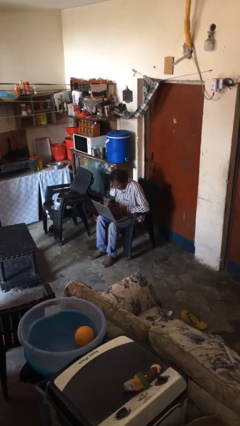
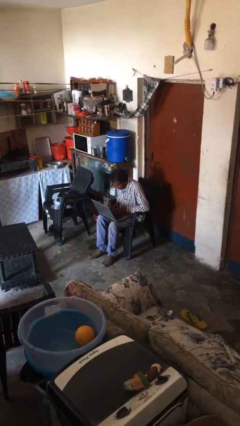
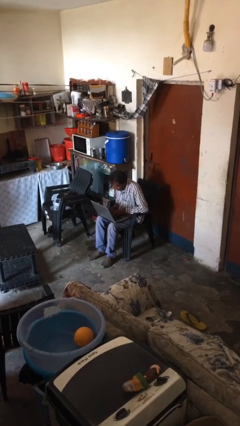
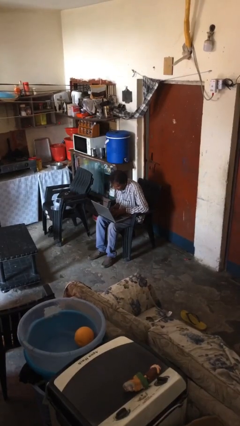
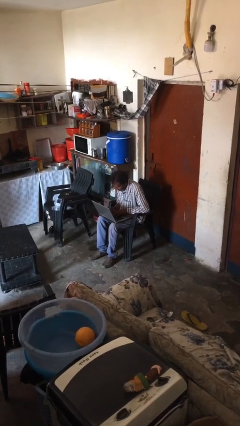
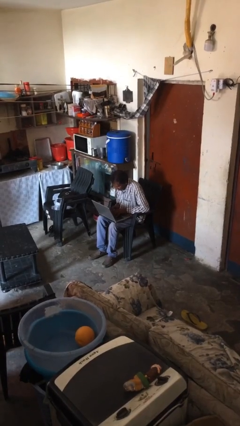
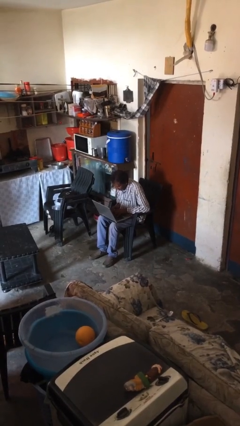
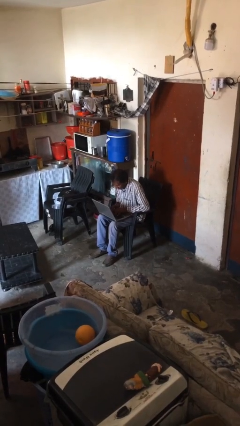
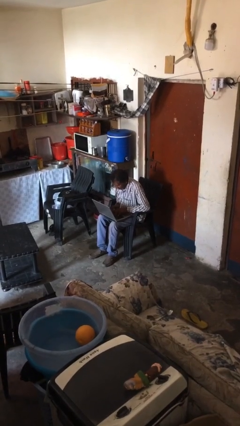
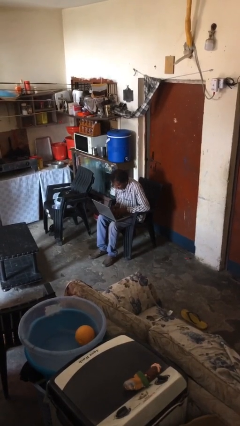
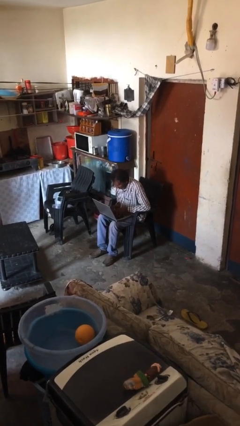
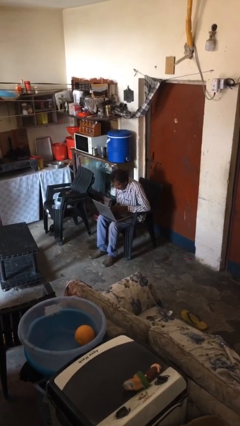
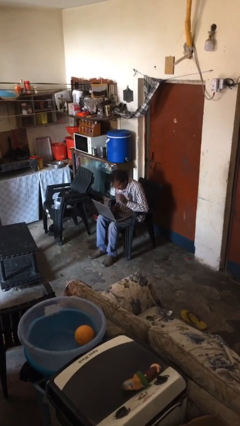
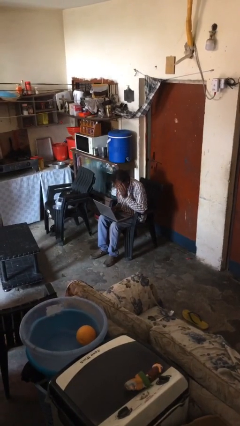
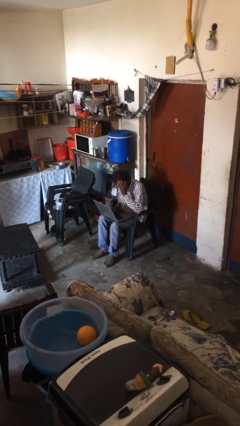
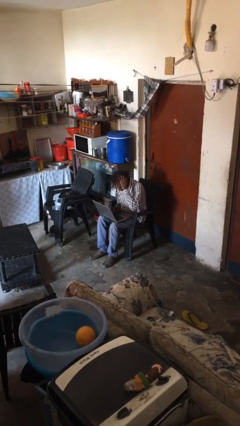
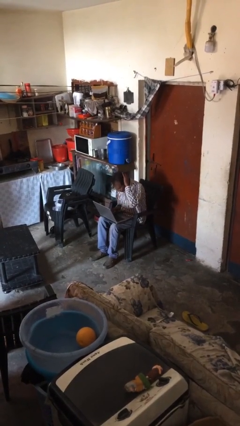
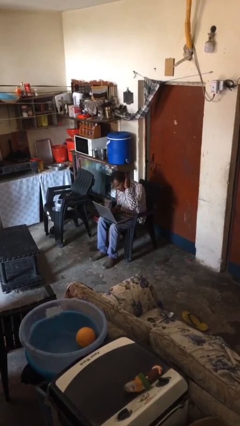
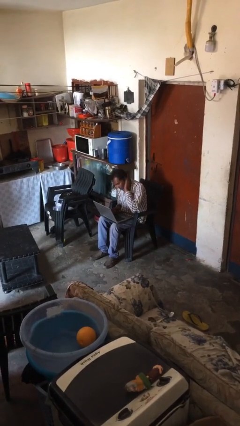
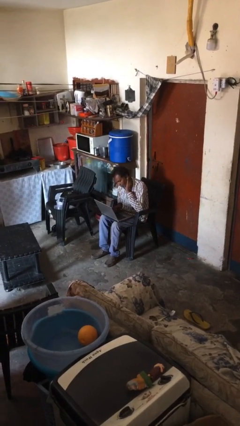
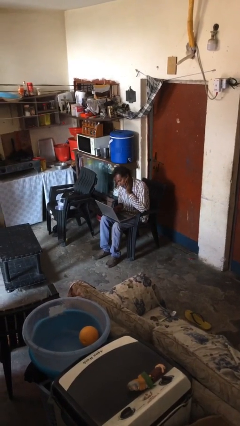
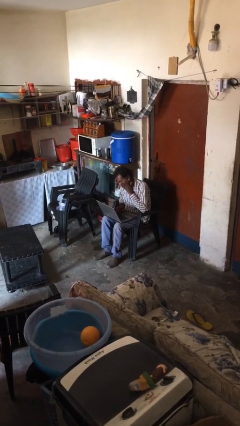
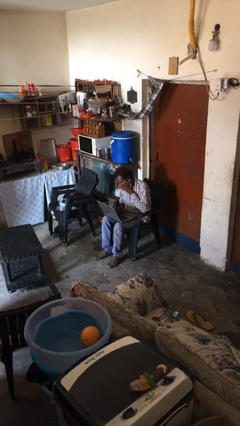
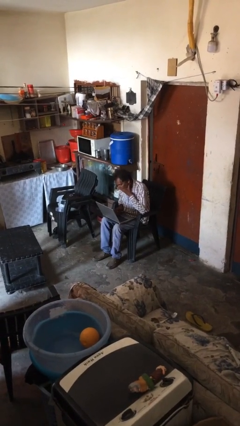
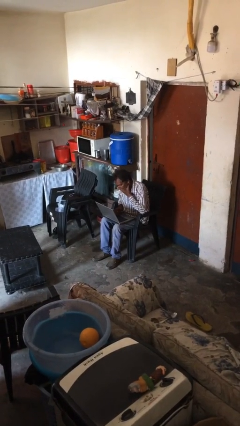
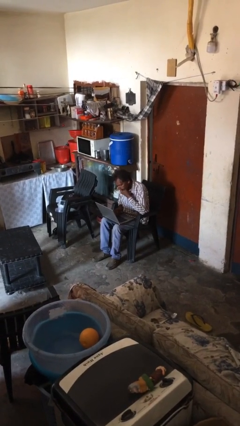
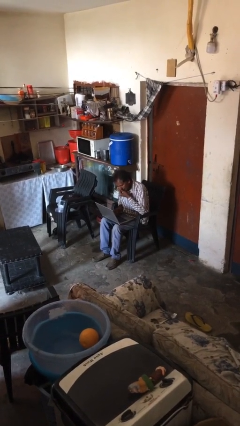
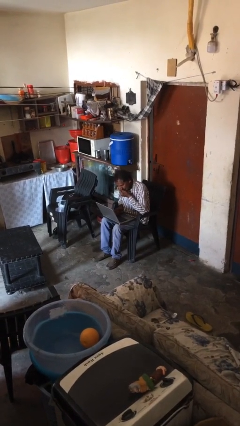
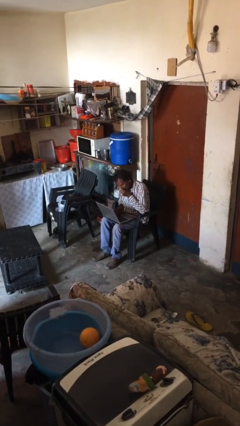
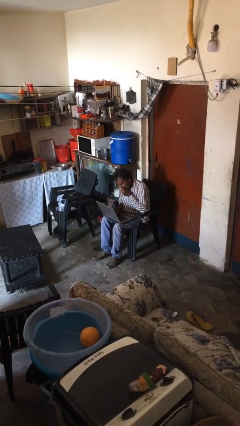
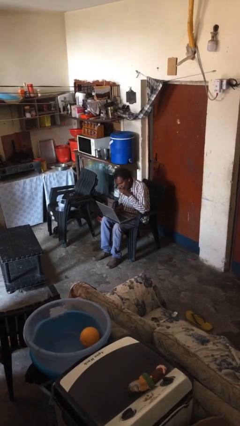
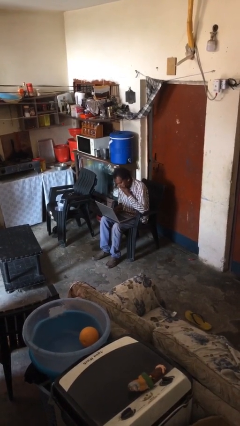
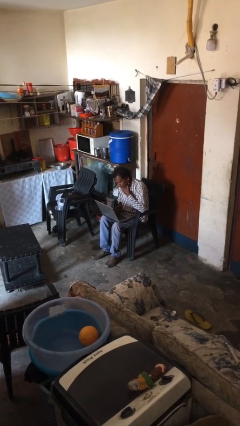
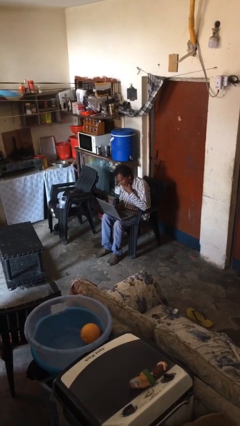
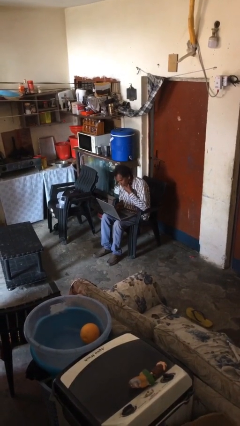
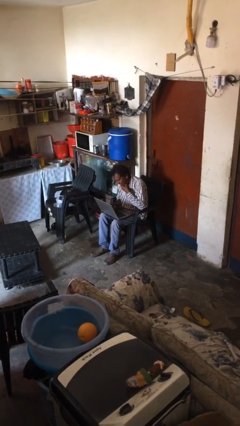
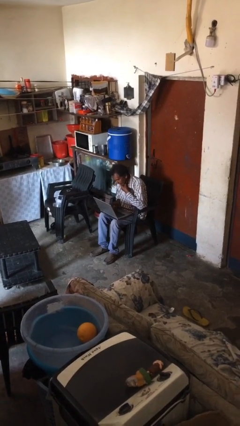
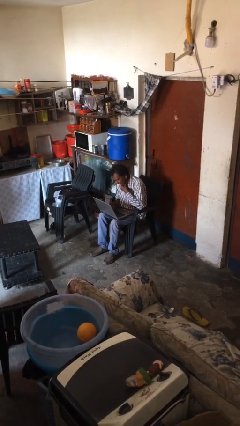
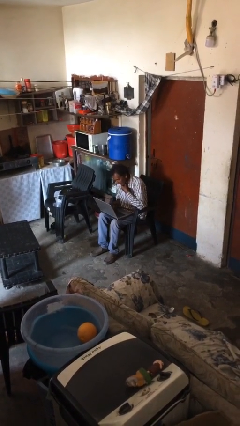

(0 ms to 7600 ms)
person interacts with laptop

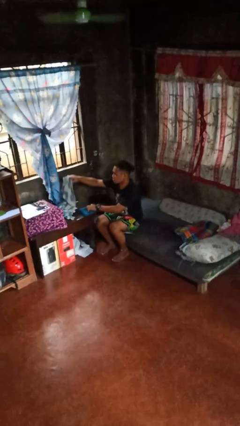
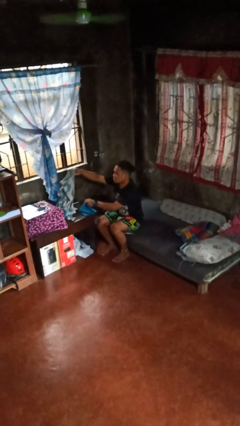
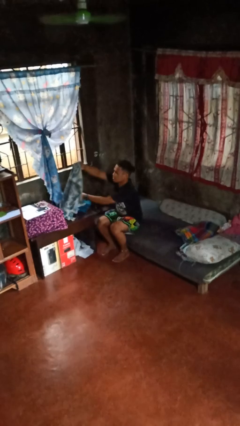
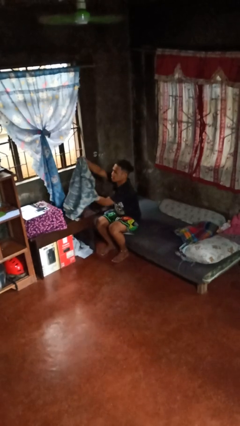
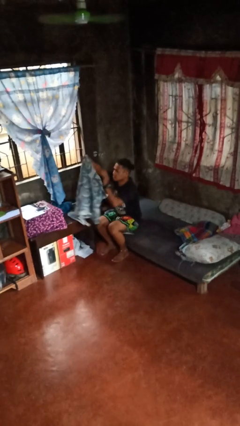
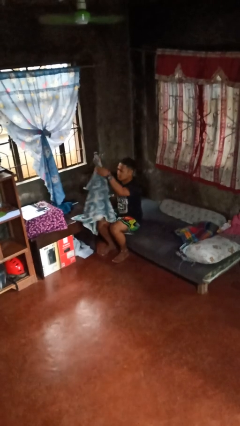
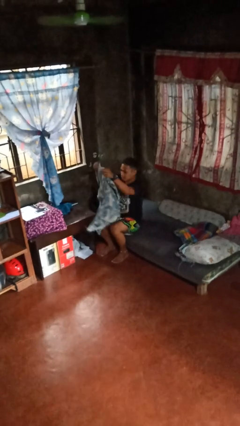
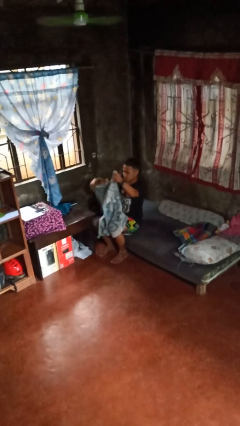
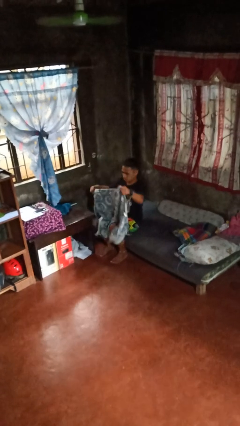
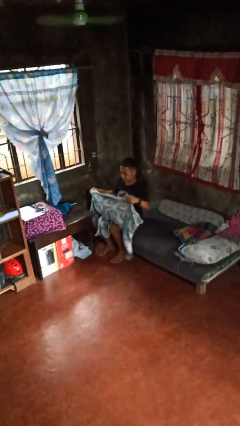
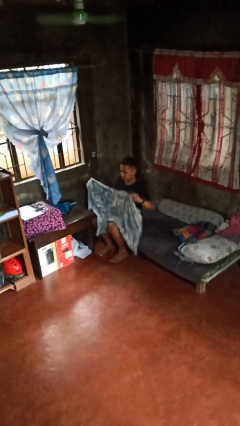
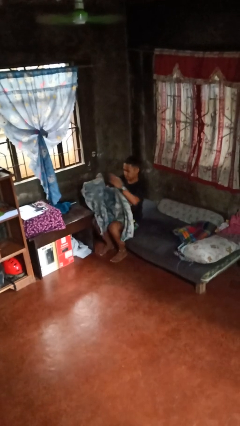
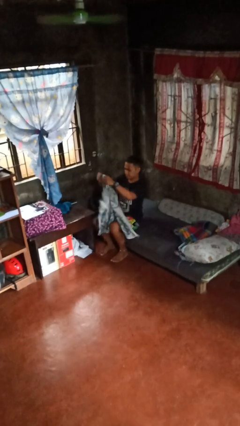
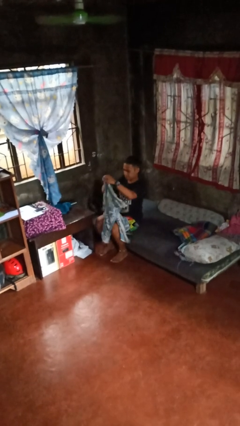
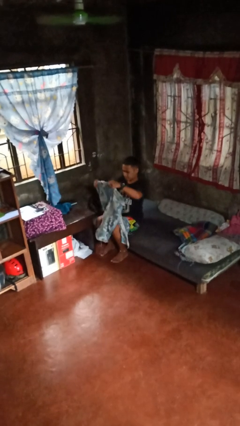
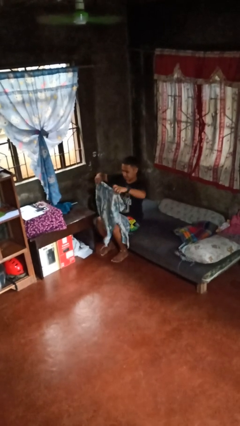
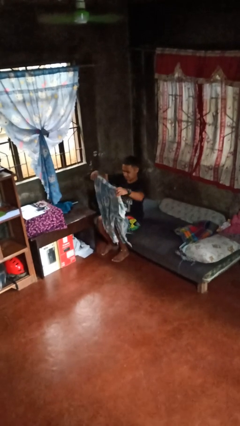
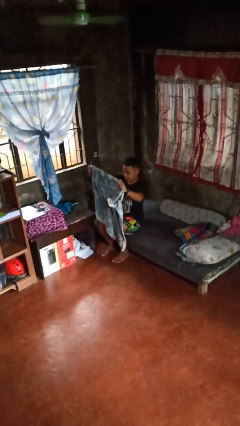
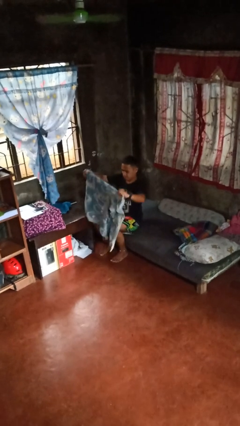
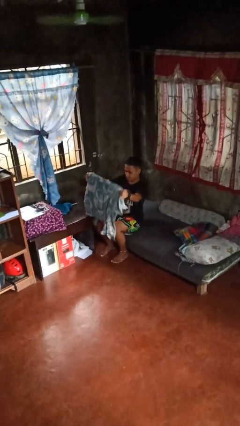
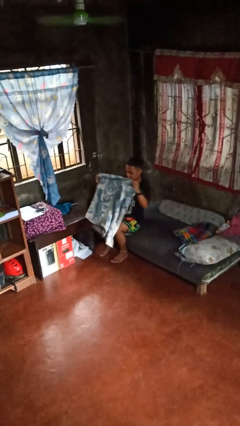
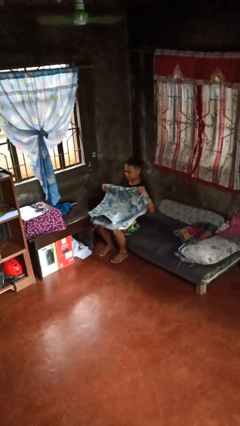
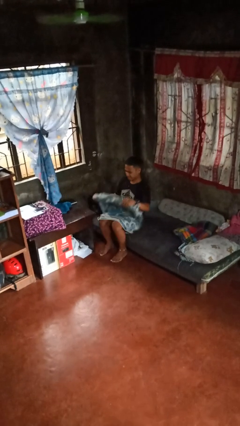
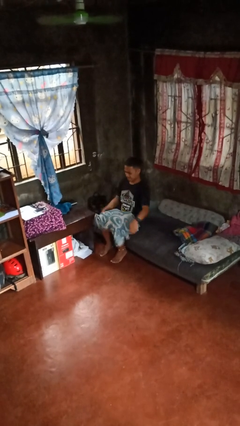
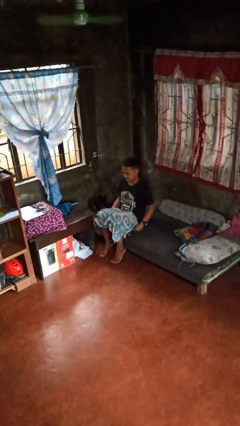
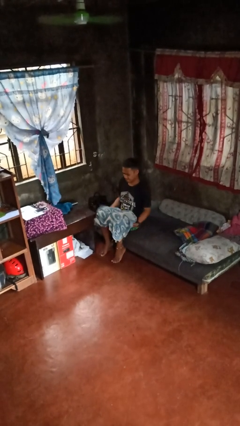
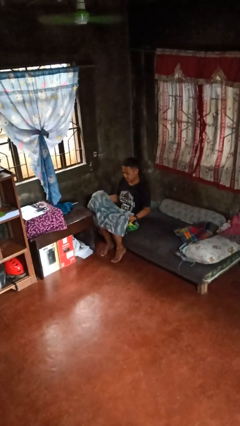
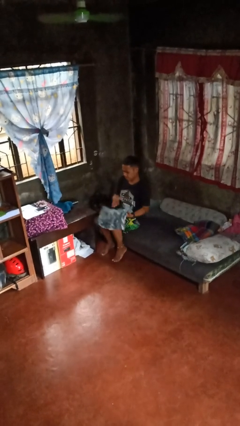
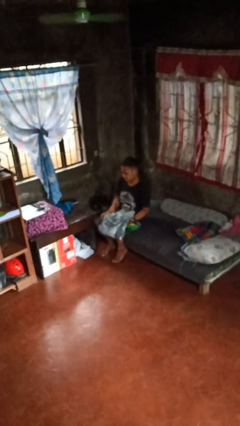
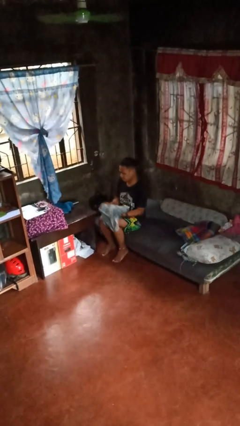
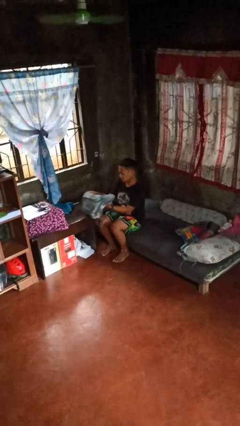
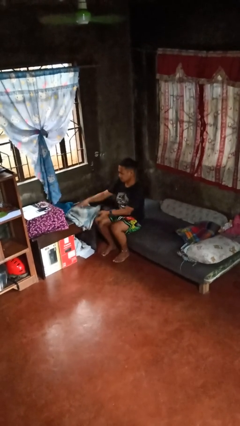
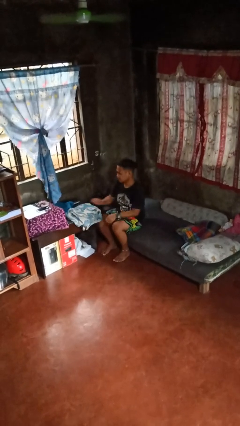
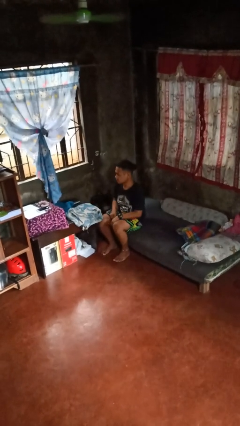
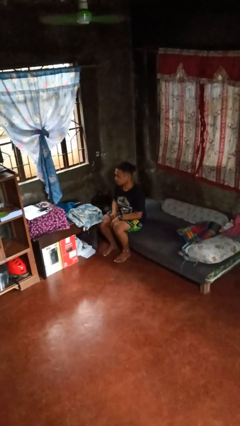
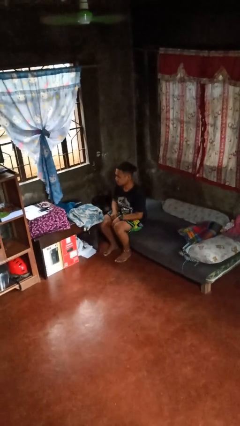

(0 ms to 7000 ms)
person folds towel

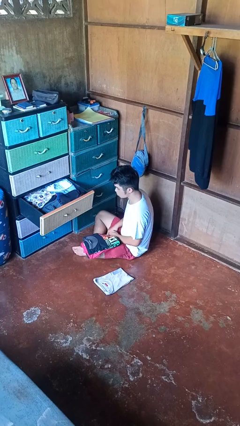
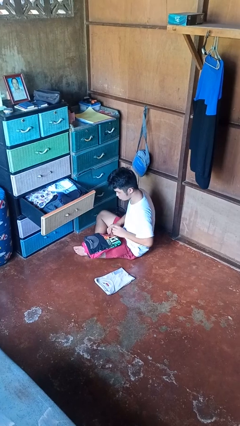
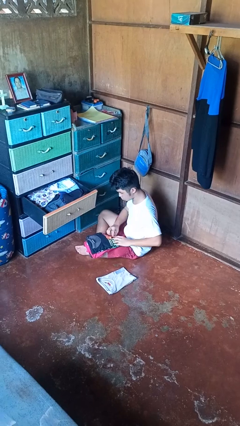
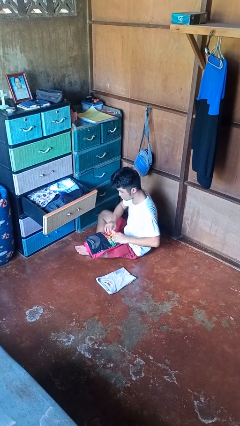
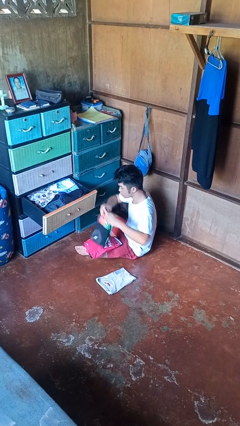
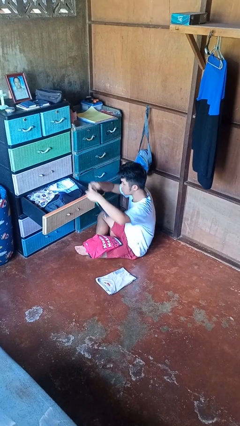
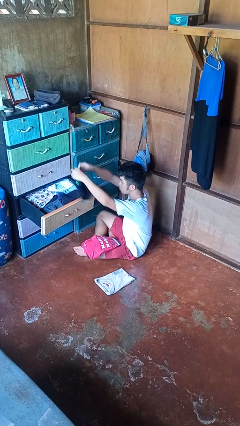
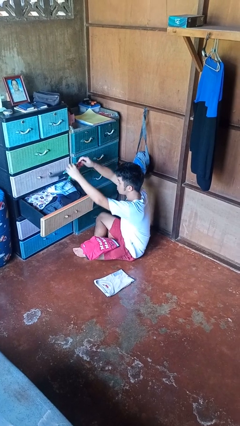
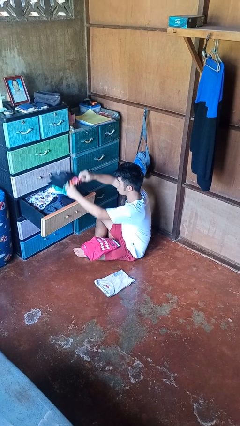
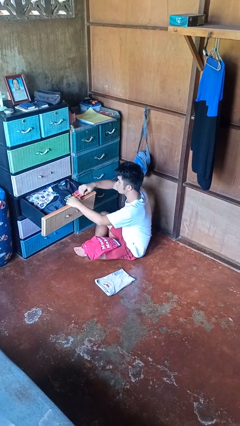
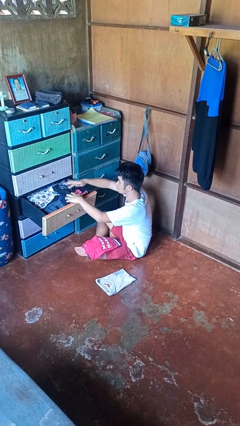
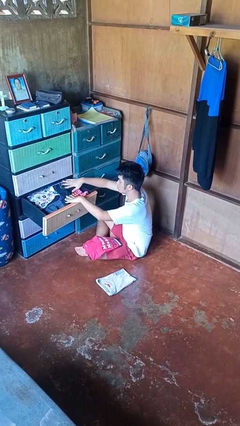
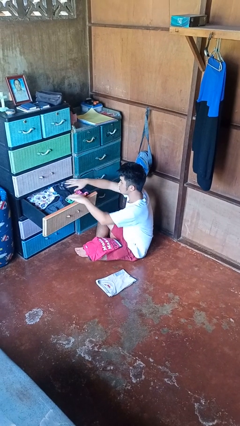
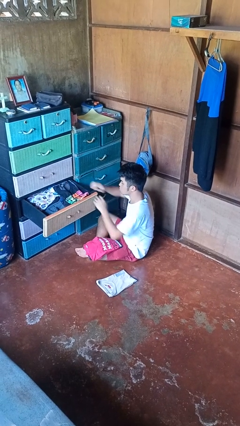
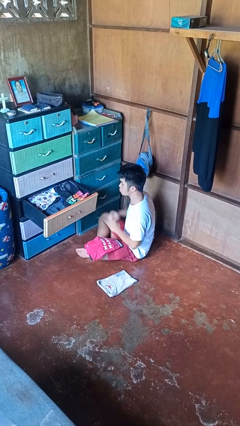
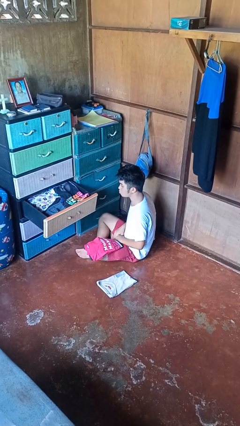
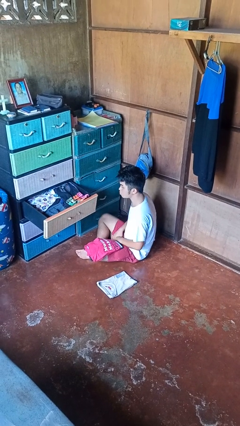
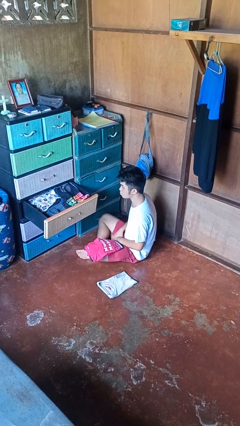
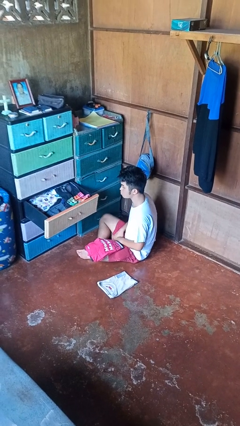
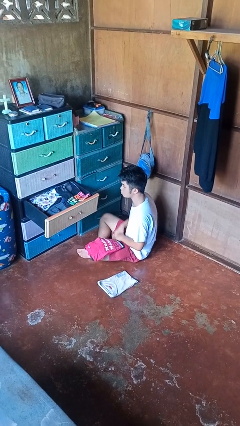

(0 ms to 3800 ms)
person puts clothes into dresser
